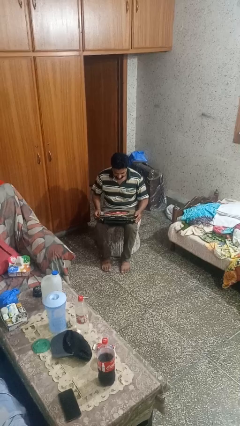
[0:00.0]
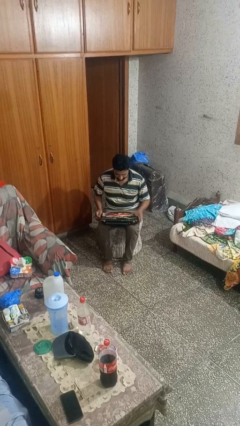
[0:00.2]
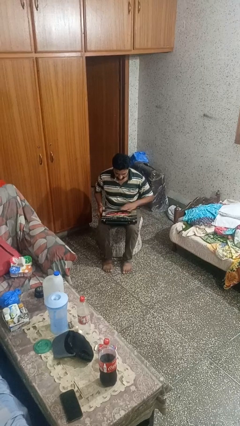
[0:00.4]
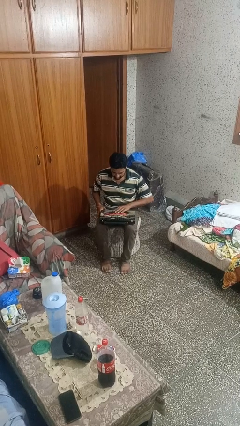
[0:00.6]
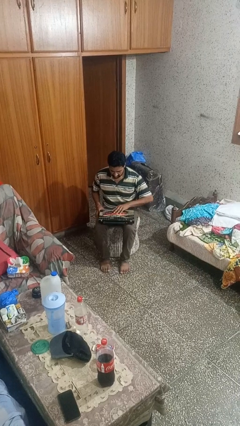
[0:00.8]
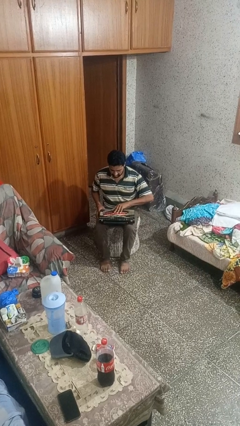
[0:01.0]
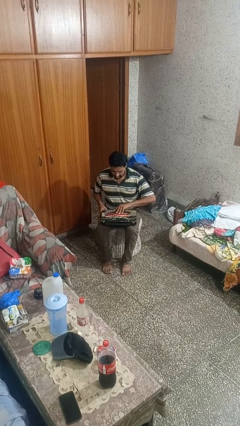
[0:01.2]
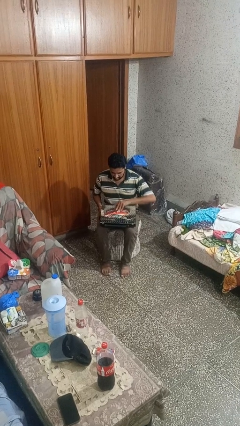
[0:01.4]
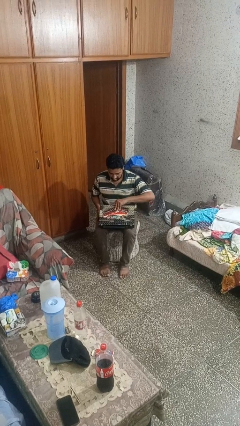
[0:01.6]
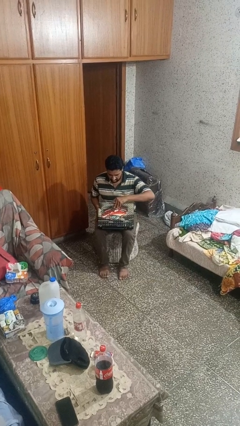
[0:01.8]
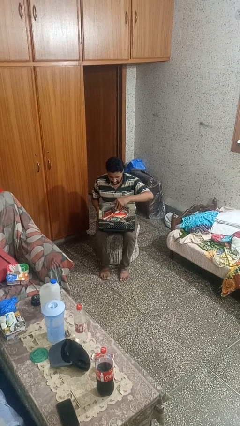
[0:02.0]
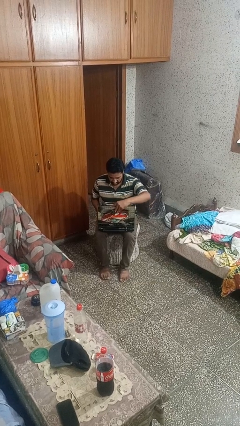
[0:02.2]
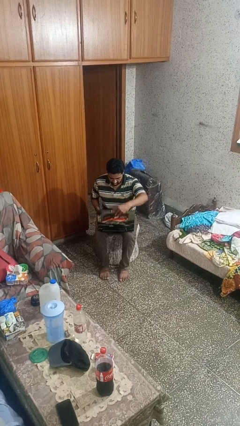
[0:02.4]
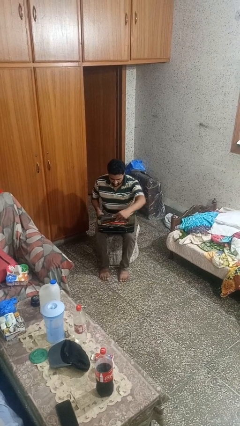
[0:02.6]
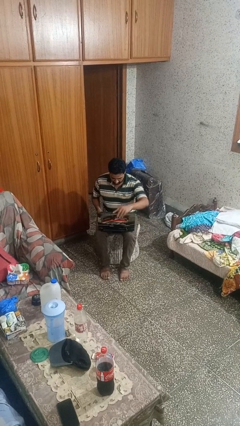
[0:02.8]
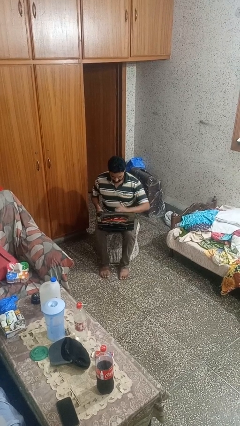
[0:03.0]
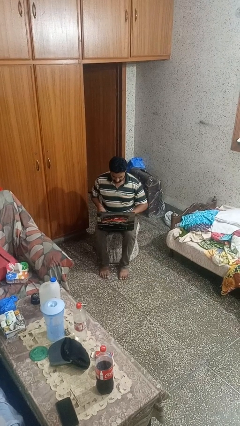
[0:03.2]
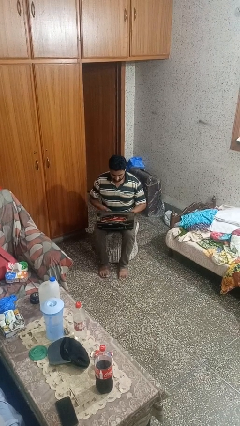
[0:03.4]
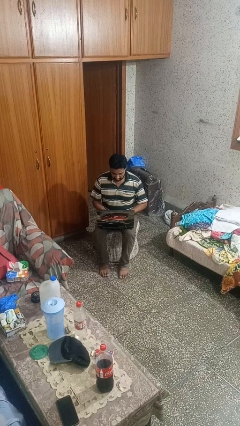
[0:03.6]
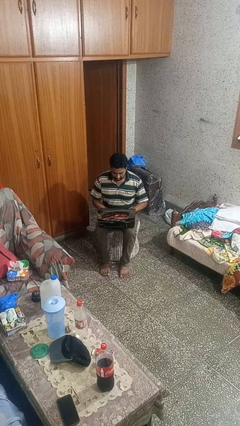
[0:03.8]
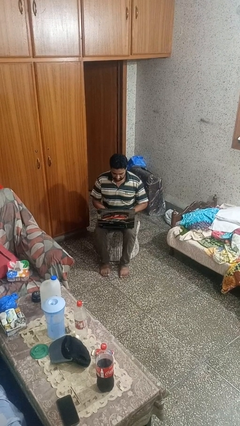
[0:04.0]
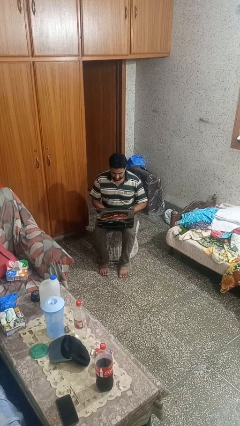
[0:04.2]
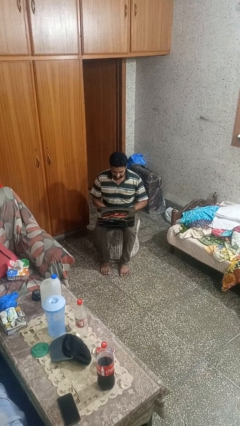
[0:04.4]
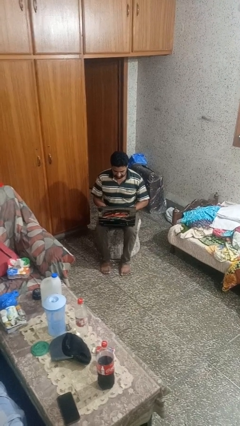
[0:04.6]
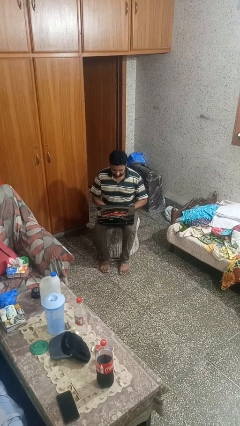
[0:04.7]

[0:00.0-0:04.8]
person opens laptop

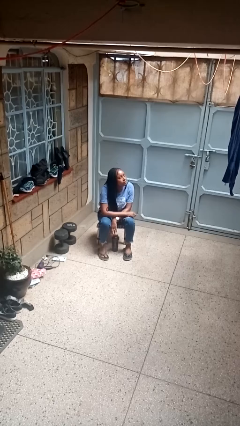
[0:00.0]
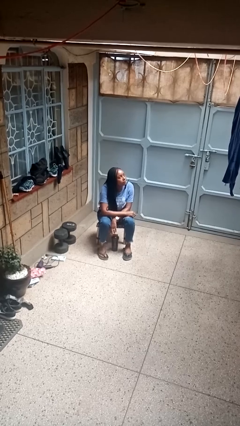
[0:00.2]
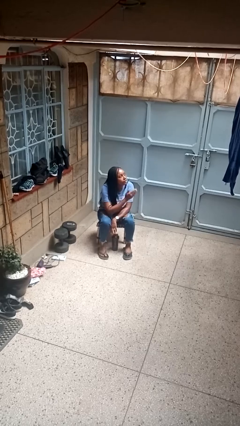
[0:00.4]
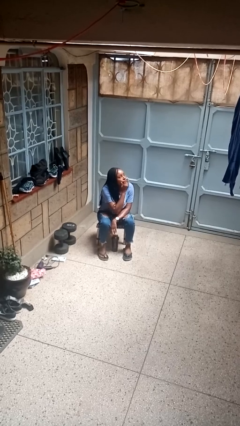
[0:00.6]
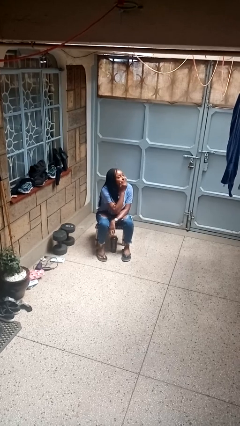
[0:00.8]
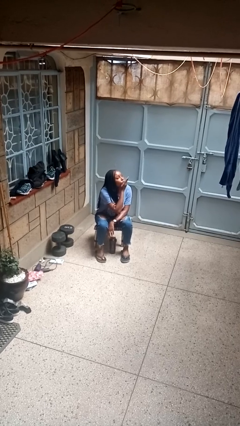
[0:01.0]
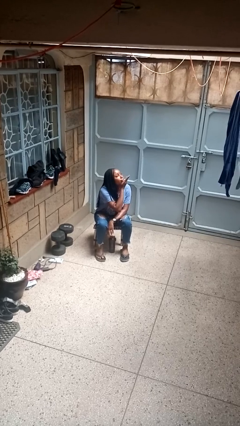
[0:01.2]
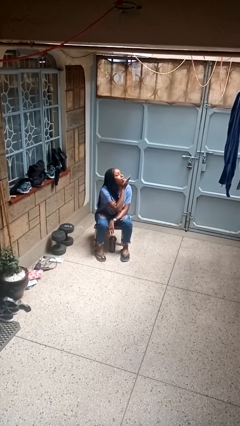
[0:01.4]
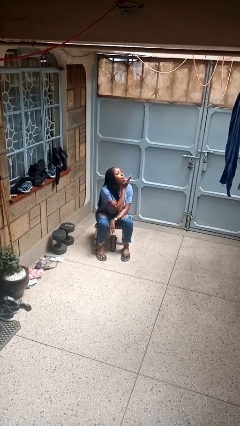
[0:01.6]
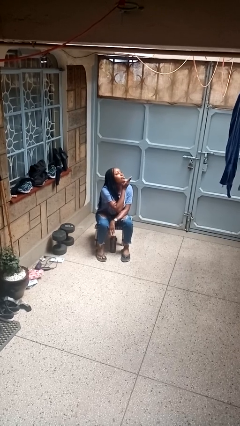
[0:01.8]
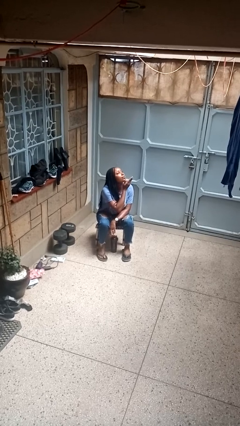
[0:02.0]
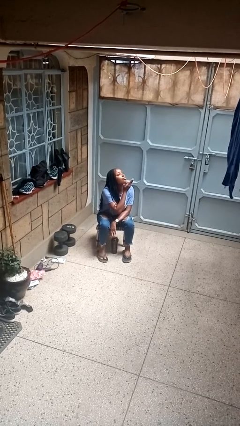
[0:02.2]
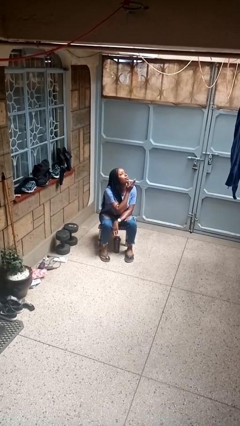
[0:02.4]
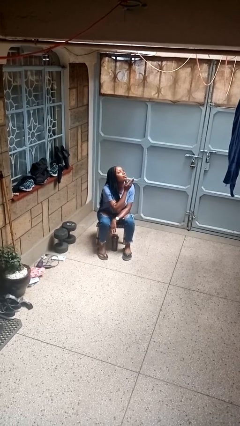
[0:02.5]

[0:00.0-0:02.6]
person gestures blow kiss

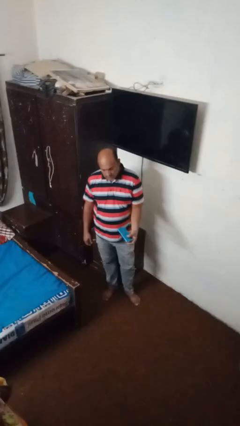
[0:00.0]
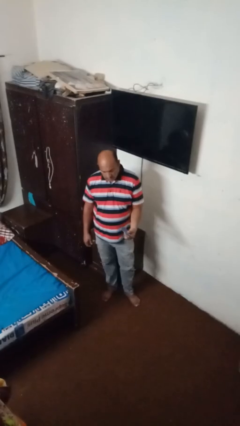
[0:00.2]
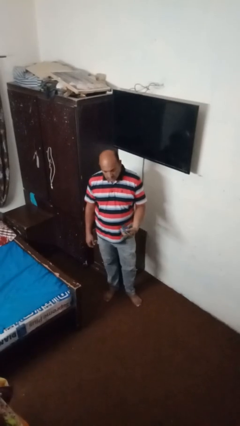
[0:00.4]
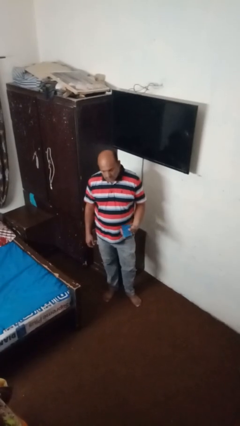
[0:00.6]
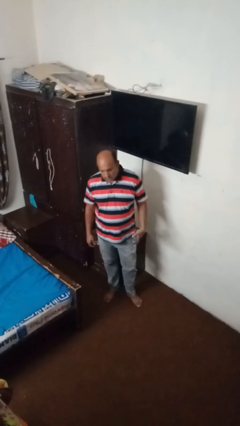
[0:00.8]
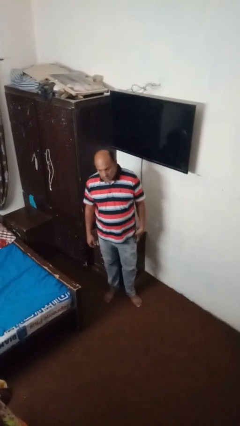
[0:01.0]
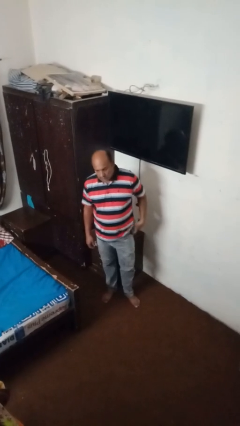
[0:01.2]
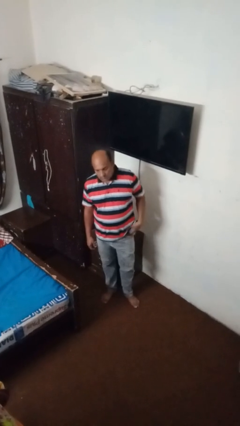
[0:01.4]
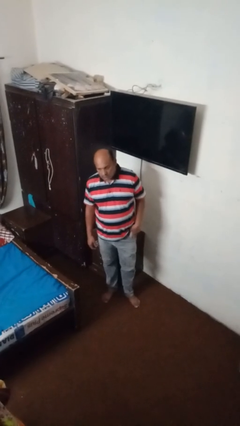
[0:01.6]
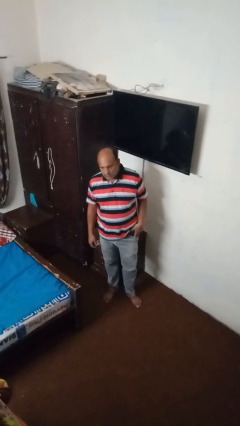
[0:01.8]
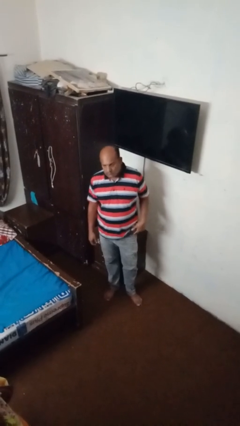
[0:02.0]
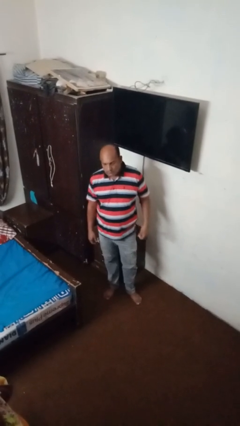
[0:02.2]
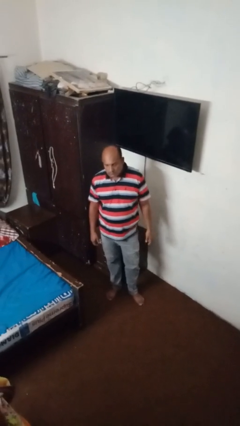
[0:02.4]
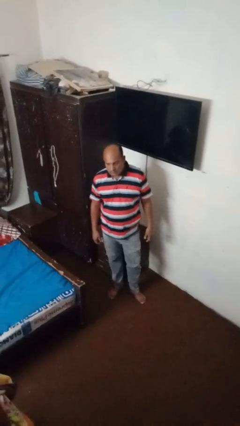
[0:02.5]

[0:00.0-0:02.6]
person puts phone into pocket

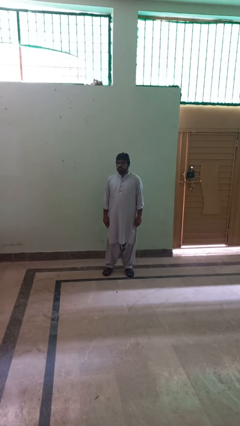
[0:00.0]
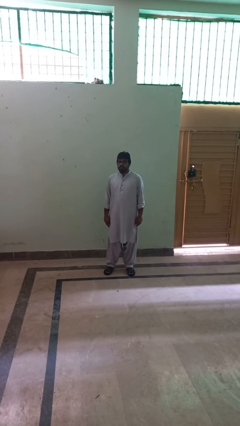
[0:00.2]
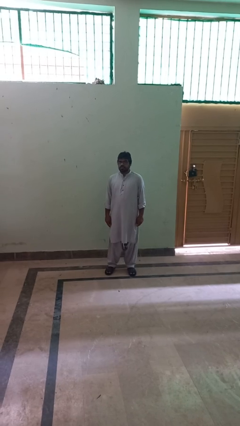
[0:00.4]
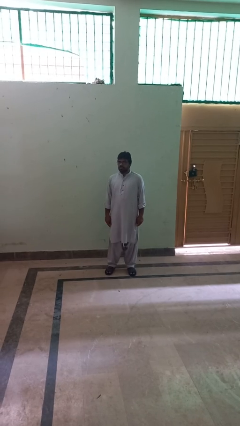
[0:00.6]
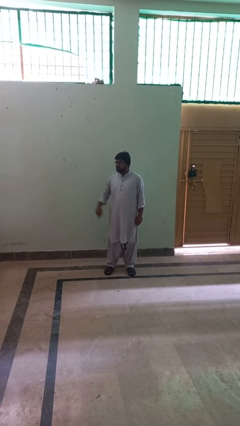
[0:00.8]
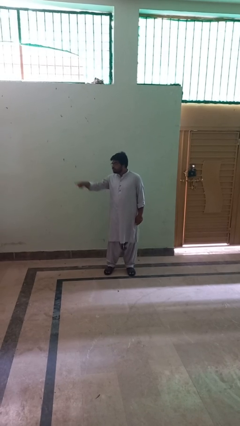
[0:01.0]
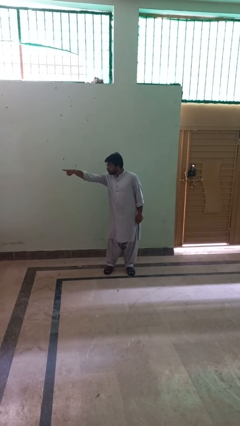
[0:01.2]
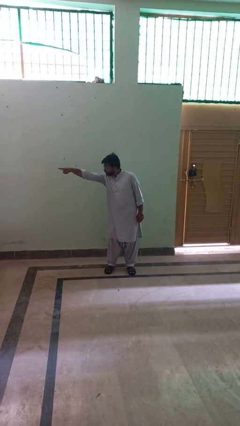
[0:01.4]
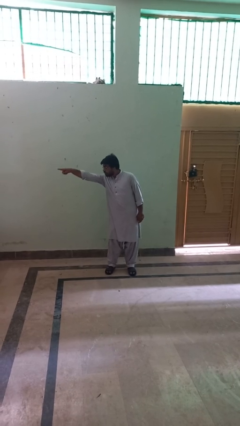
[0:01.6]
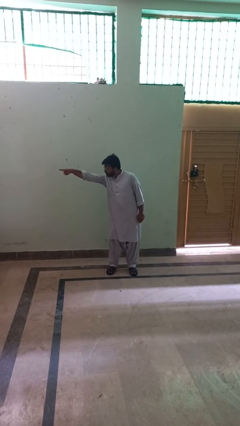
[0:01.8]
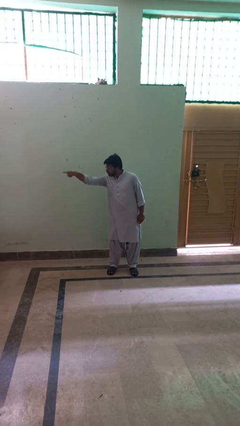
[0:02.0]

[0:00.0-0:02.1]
person points at person

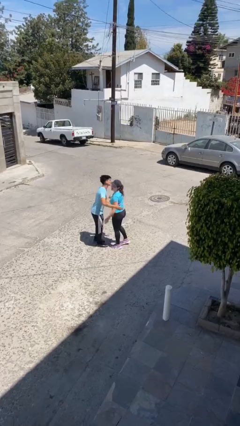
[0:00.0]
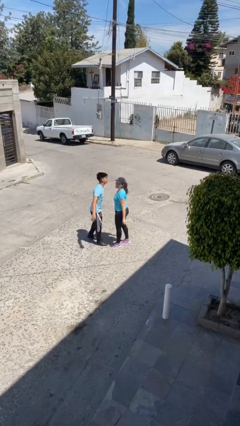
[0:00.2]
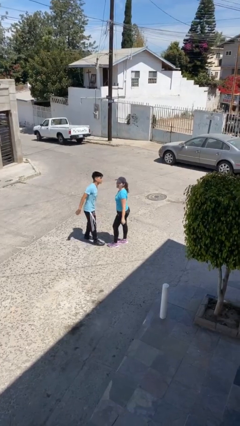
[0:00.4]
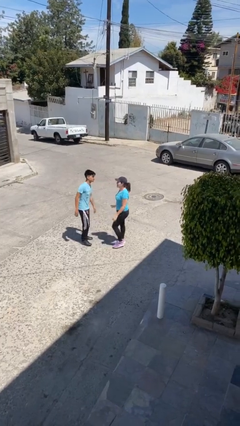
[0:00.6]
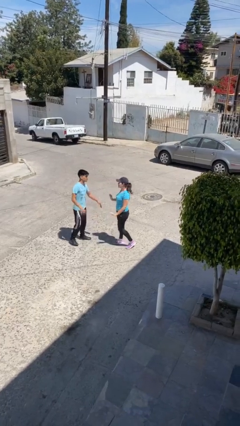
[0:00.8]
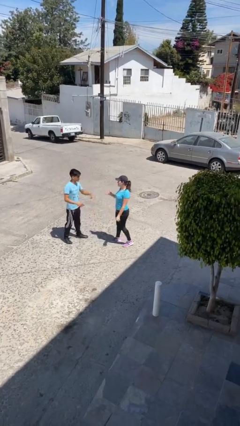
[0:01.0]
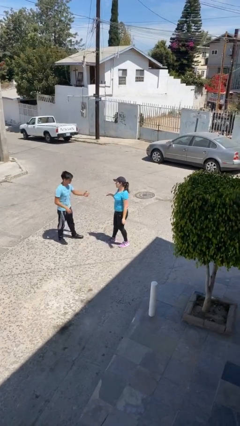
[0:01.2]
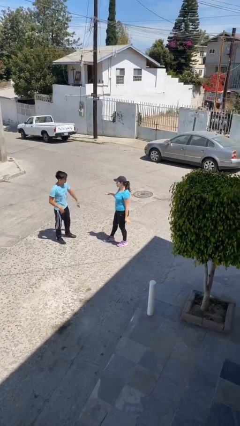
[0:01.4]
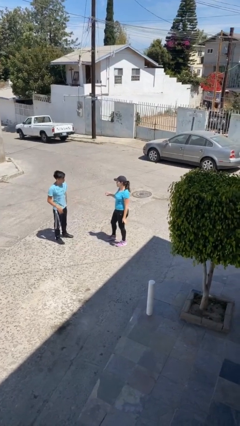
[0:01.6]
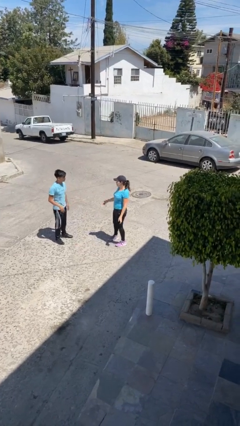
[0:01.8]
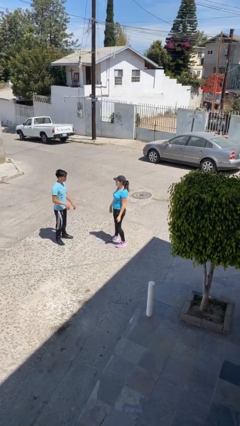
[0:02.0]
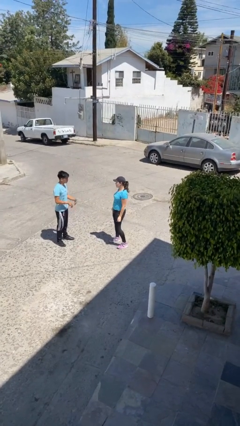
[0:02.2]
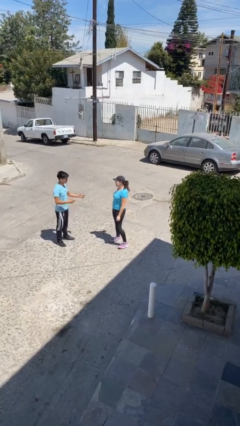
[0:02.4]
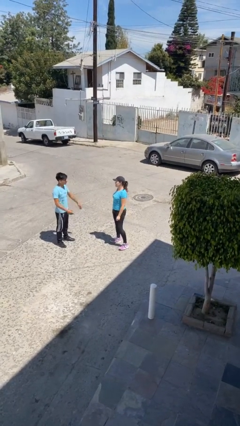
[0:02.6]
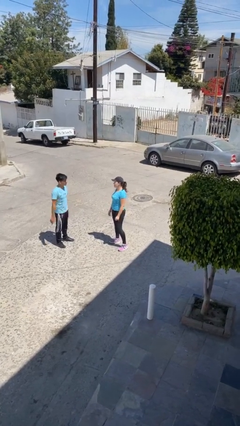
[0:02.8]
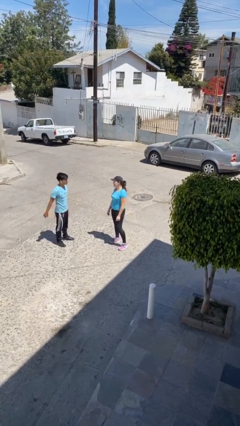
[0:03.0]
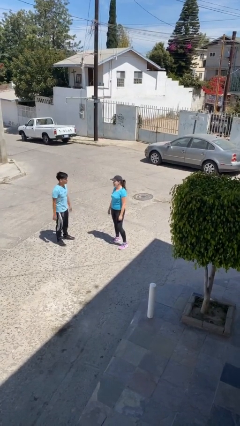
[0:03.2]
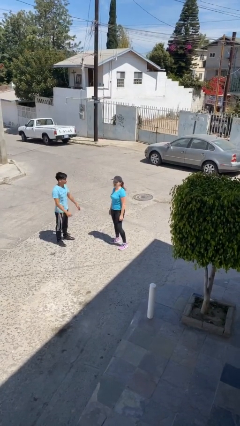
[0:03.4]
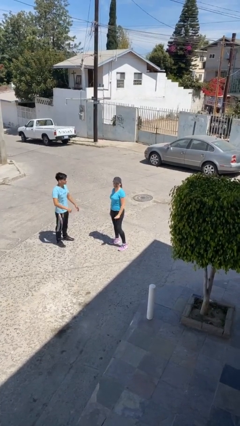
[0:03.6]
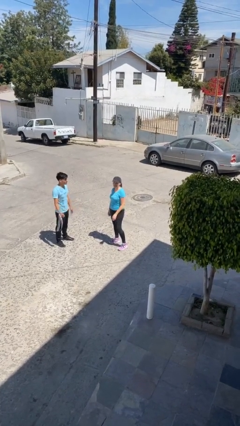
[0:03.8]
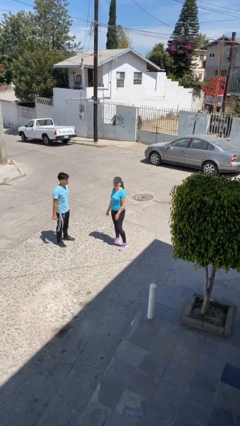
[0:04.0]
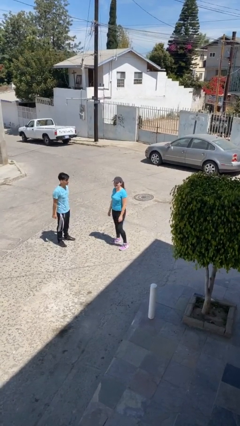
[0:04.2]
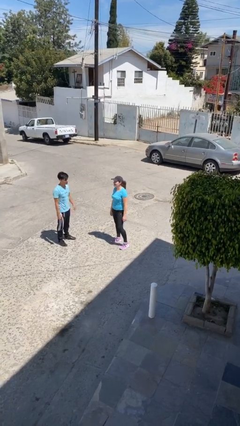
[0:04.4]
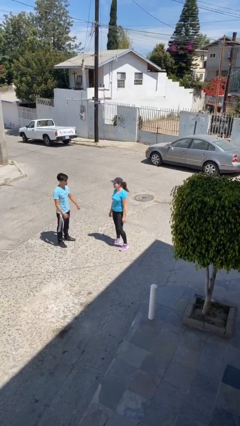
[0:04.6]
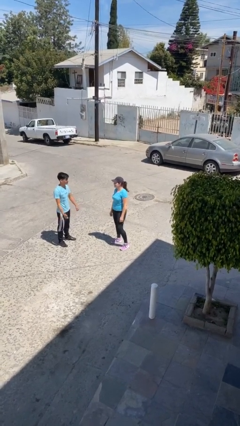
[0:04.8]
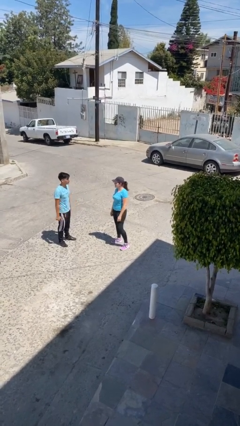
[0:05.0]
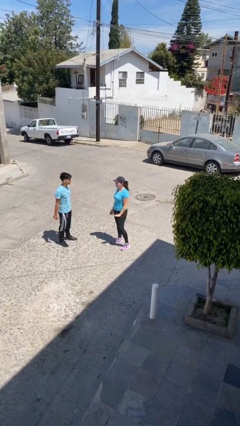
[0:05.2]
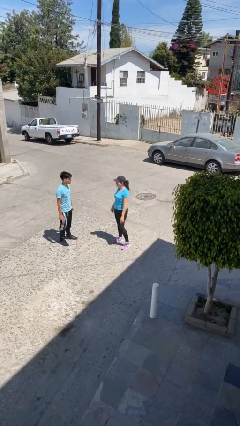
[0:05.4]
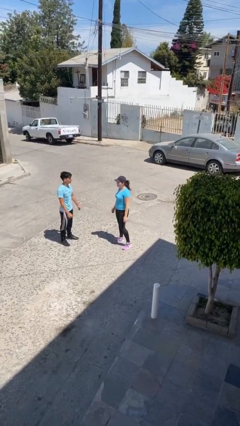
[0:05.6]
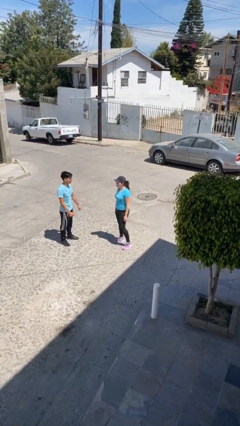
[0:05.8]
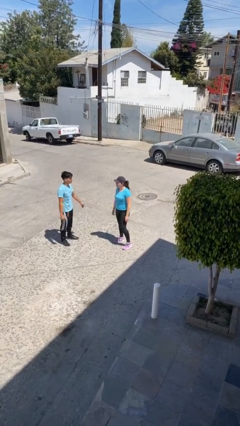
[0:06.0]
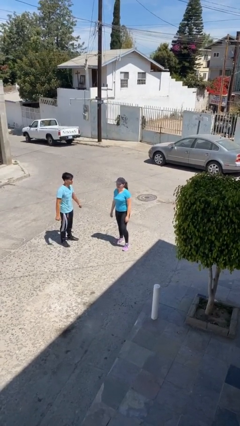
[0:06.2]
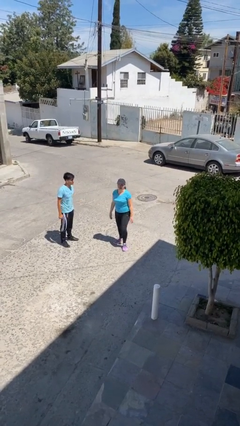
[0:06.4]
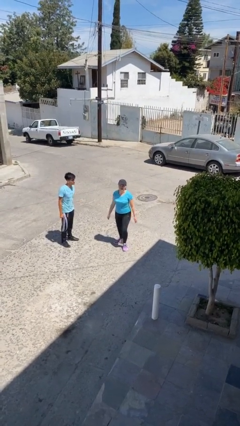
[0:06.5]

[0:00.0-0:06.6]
person talks to person
